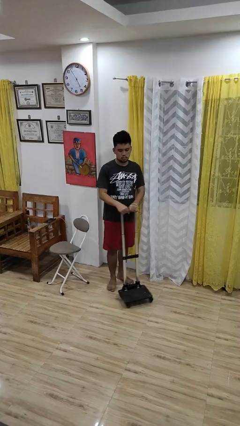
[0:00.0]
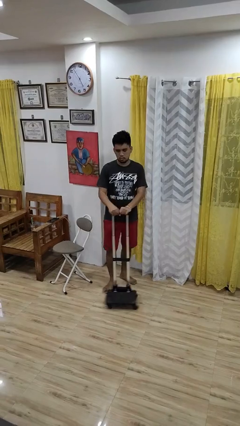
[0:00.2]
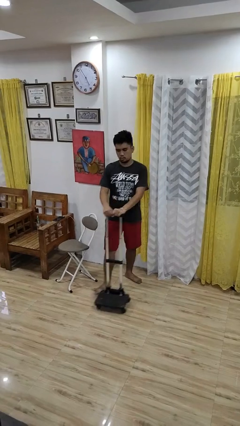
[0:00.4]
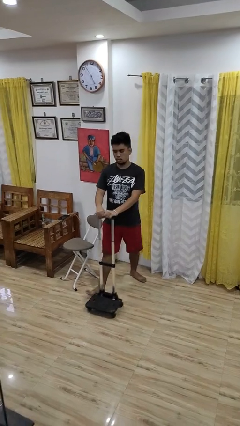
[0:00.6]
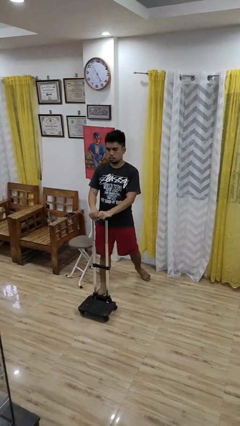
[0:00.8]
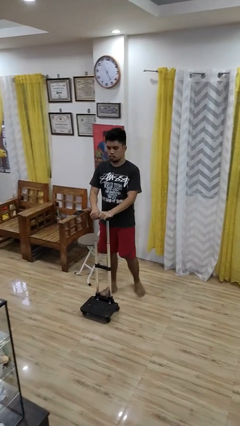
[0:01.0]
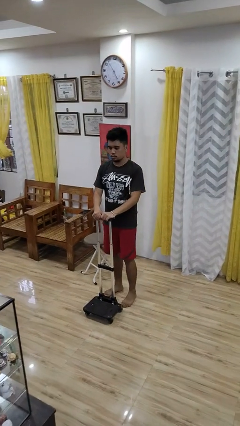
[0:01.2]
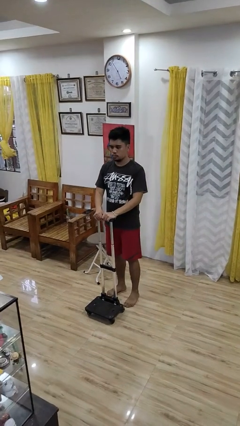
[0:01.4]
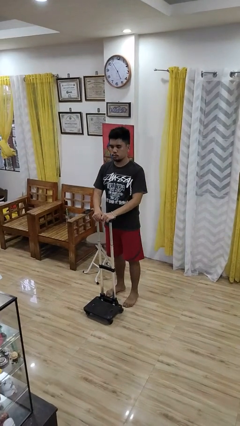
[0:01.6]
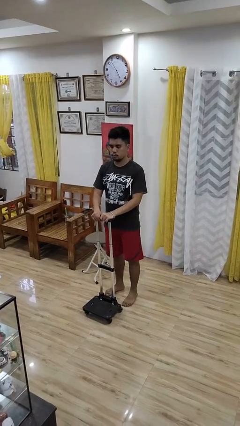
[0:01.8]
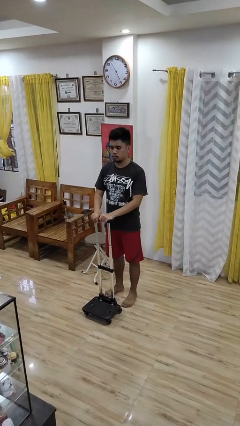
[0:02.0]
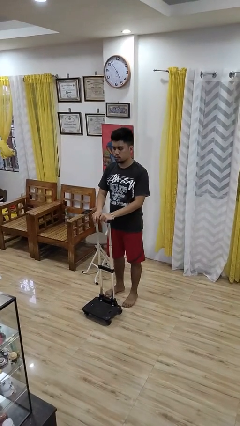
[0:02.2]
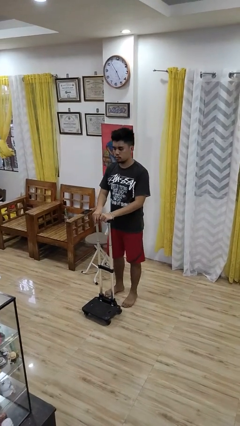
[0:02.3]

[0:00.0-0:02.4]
person pushes wheeled cart

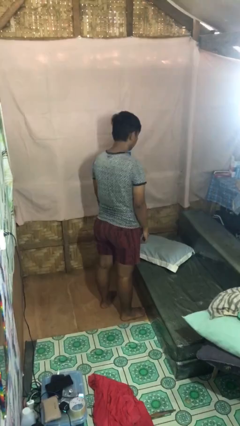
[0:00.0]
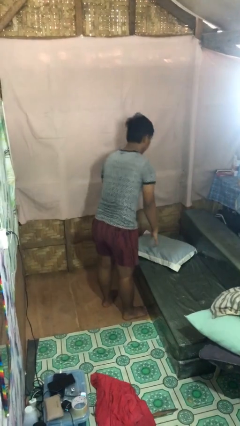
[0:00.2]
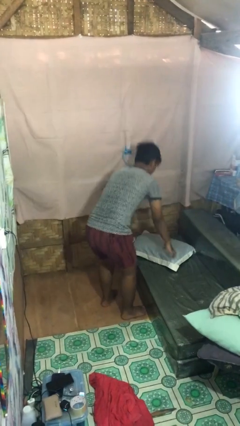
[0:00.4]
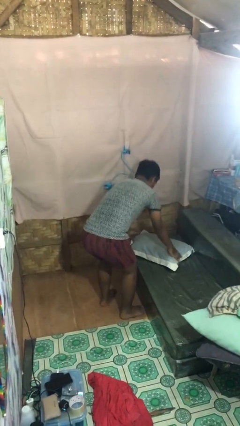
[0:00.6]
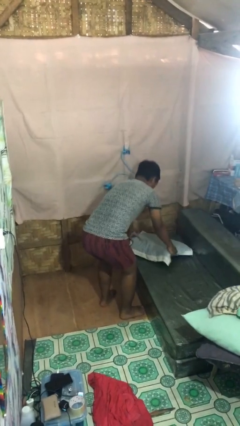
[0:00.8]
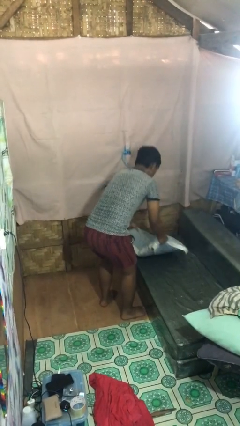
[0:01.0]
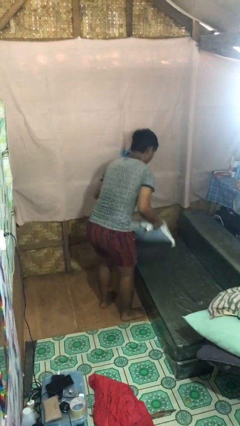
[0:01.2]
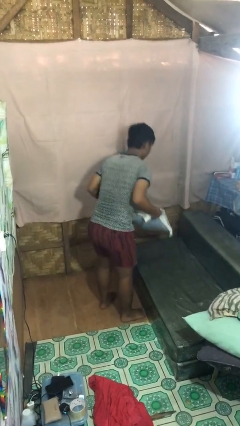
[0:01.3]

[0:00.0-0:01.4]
person picks up object from couch

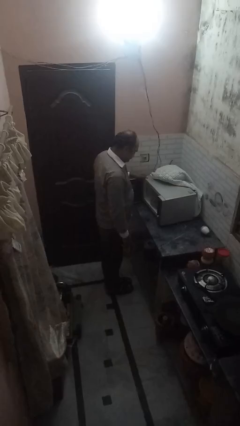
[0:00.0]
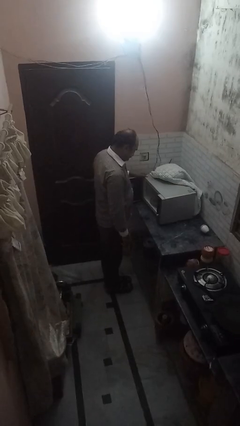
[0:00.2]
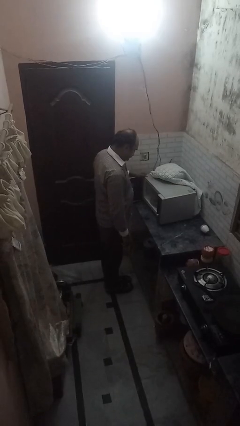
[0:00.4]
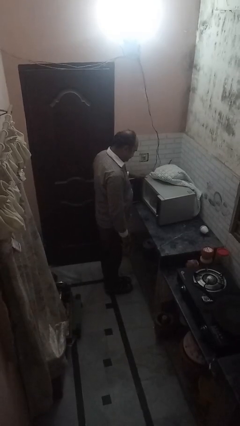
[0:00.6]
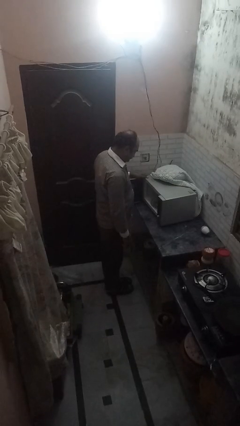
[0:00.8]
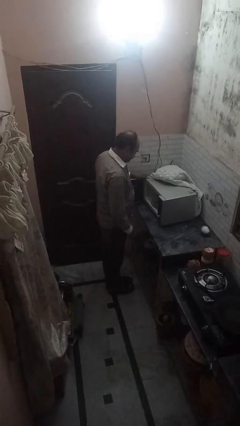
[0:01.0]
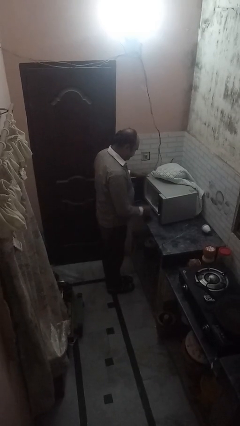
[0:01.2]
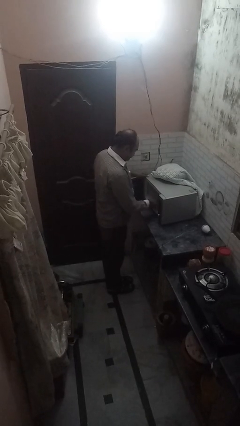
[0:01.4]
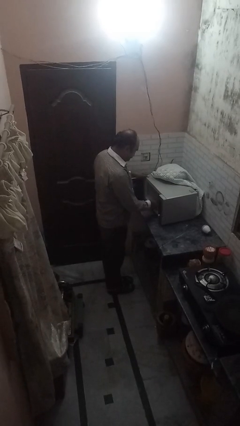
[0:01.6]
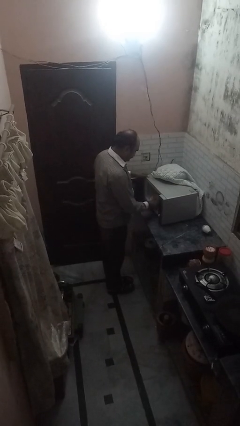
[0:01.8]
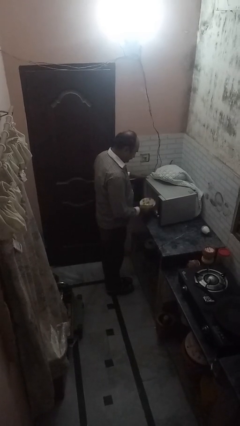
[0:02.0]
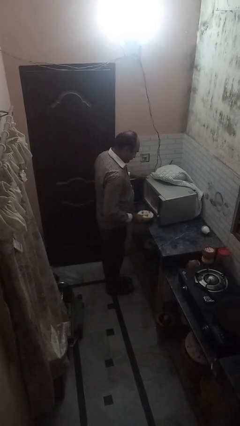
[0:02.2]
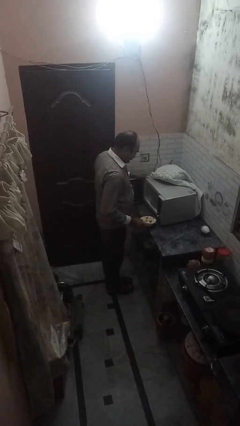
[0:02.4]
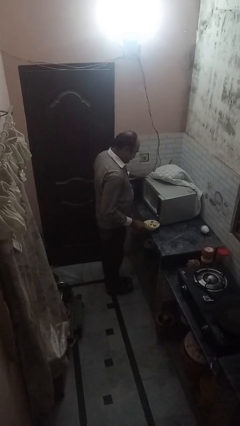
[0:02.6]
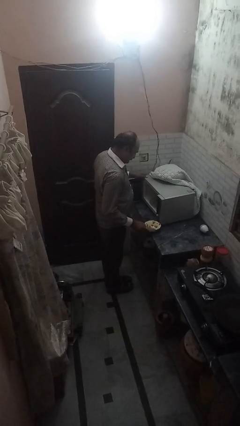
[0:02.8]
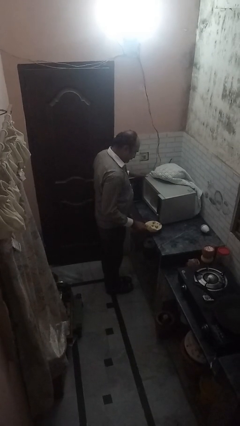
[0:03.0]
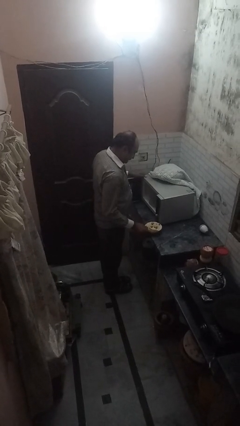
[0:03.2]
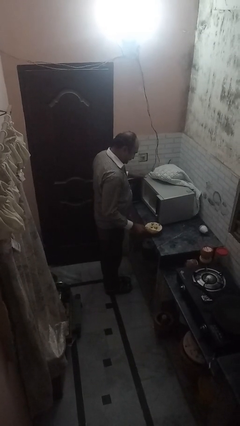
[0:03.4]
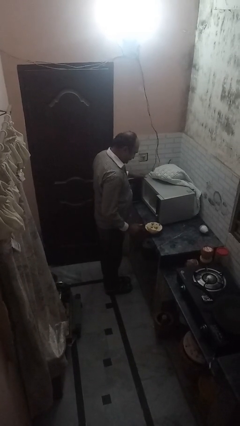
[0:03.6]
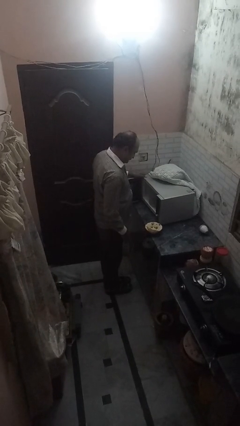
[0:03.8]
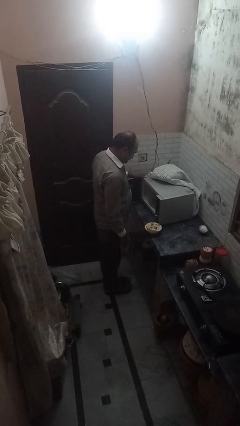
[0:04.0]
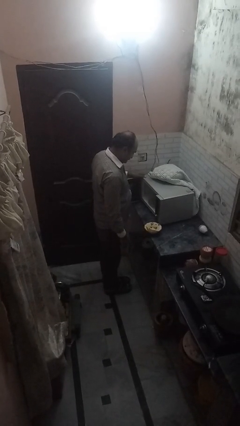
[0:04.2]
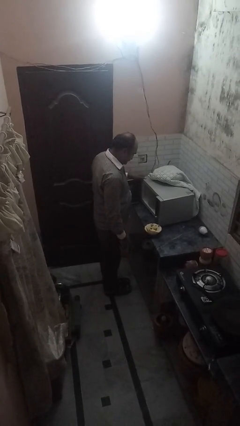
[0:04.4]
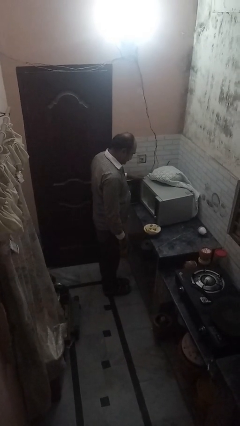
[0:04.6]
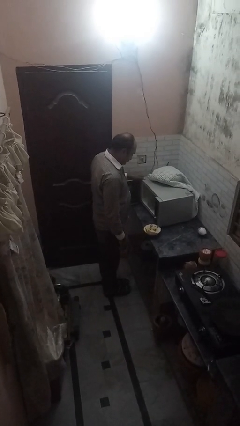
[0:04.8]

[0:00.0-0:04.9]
person takes object from microwave

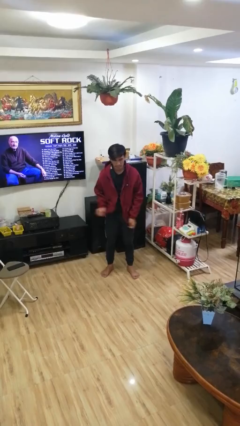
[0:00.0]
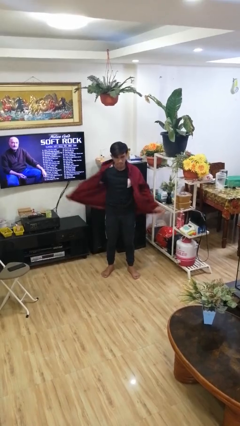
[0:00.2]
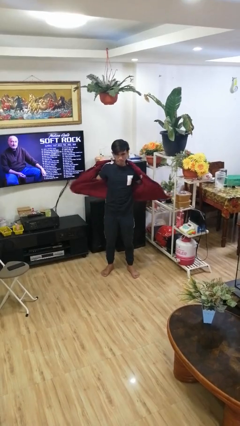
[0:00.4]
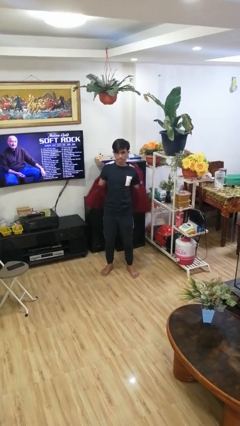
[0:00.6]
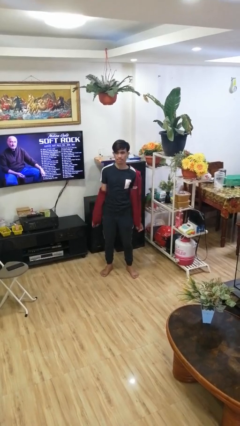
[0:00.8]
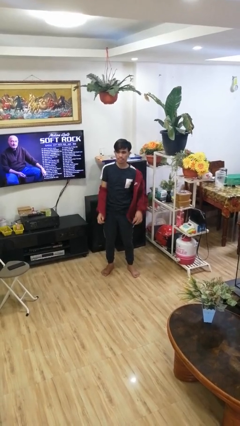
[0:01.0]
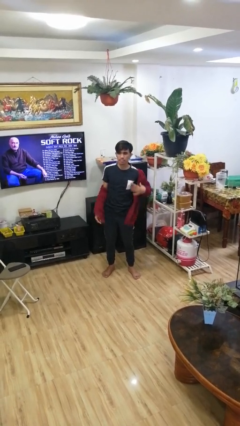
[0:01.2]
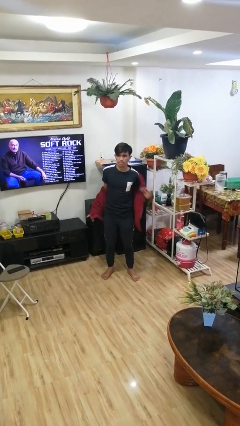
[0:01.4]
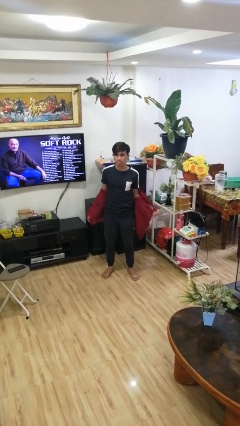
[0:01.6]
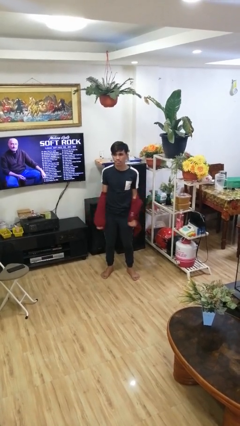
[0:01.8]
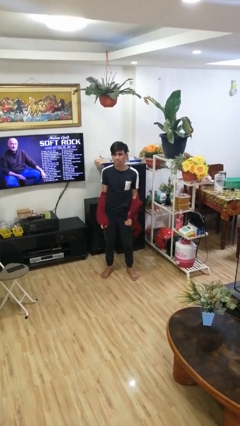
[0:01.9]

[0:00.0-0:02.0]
person takes off jacket

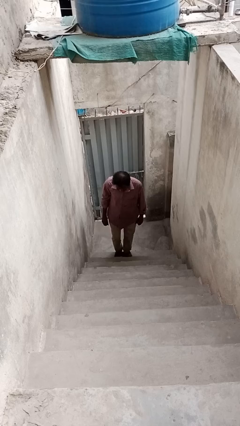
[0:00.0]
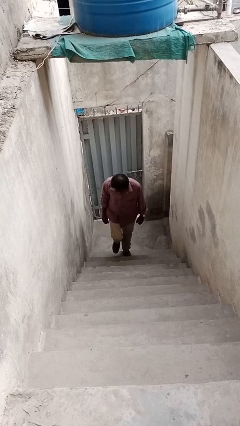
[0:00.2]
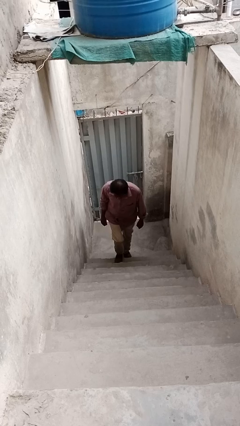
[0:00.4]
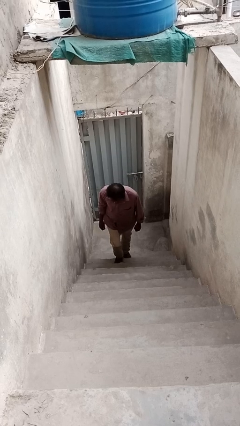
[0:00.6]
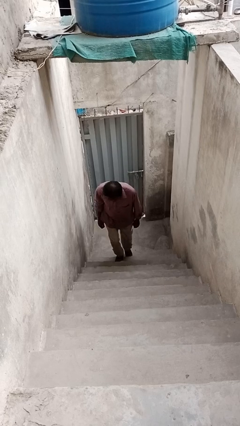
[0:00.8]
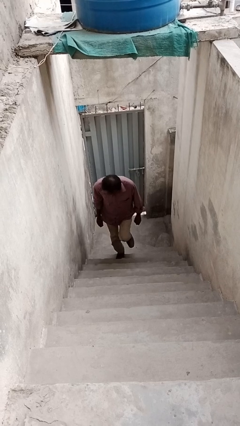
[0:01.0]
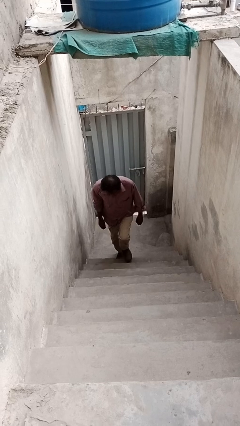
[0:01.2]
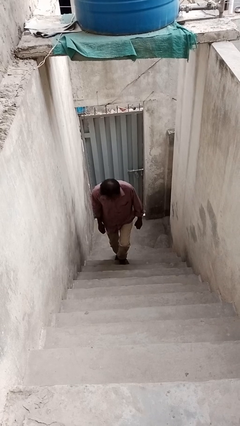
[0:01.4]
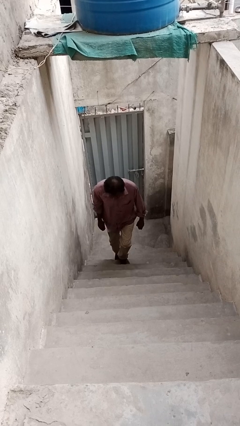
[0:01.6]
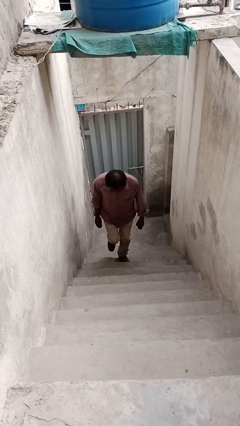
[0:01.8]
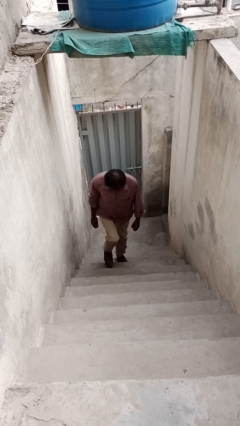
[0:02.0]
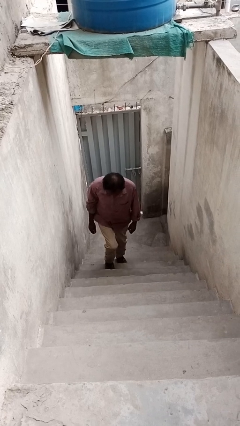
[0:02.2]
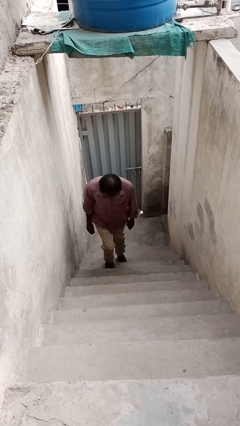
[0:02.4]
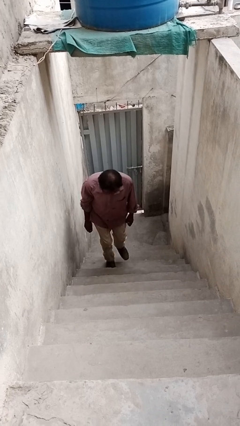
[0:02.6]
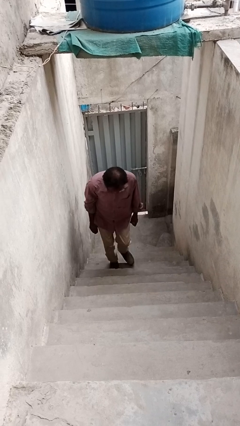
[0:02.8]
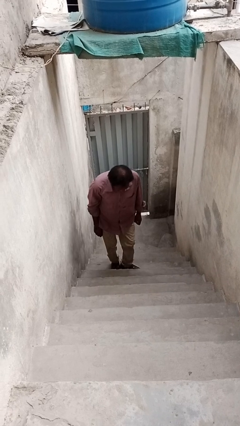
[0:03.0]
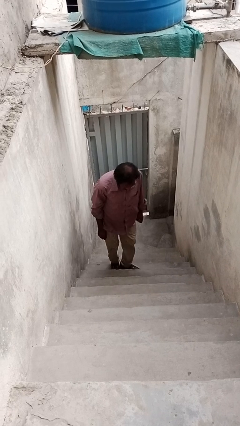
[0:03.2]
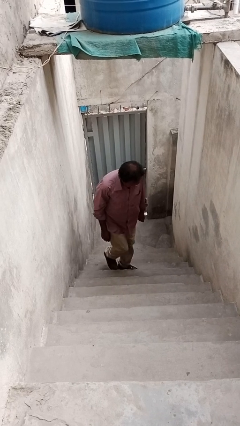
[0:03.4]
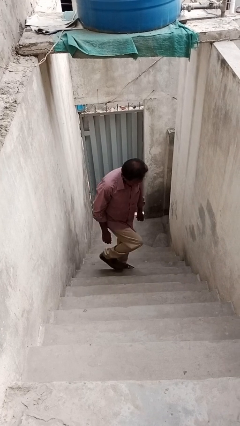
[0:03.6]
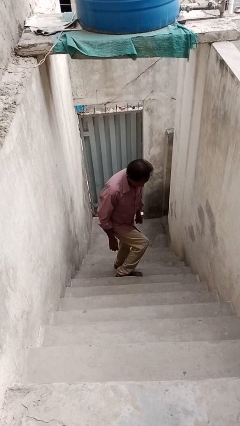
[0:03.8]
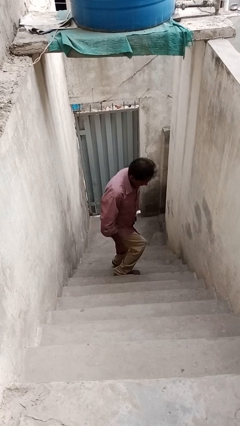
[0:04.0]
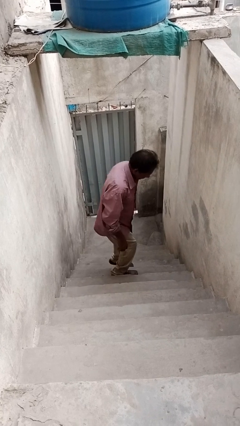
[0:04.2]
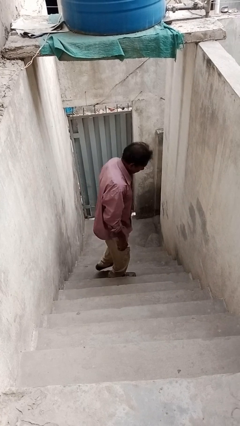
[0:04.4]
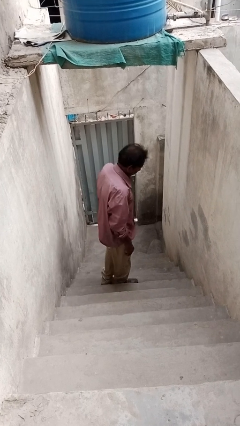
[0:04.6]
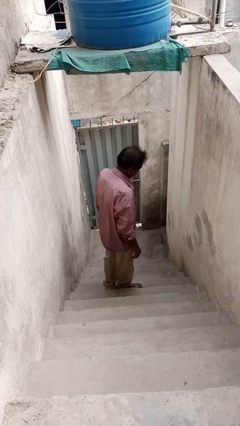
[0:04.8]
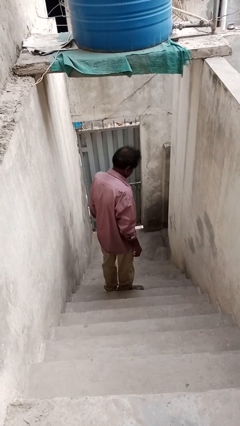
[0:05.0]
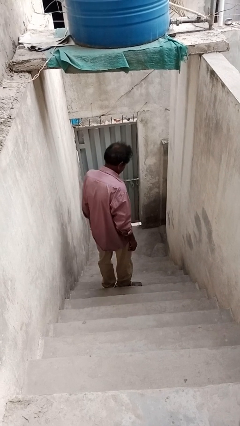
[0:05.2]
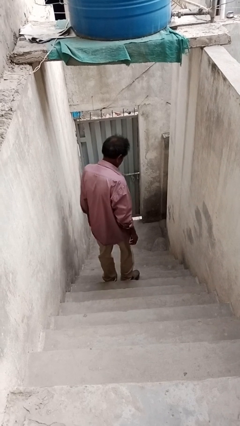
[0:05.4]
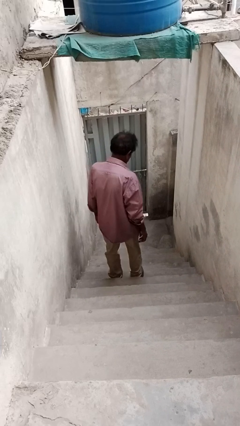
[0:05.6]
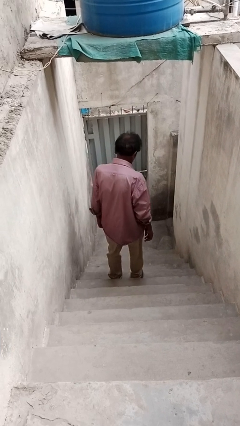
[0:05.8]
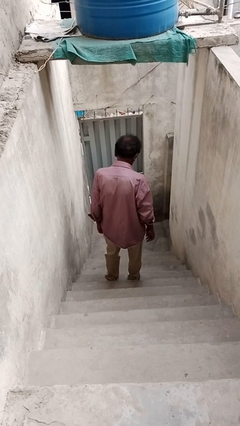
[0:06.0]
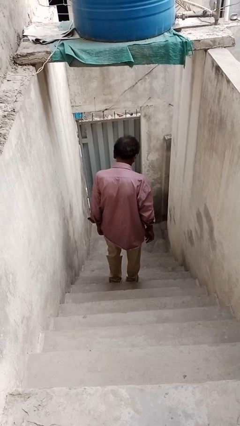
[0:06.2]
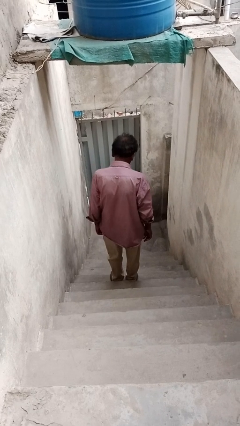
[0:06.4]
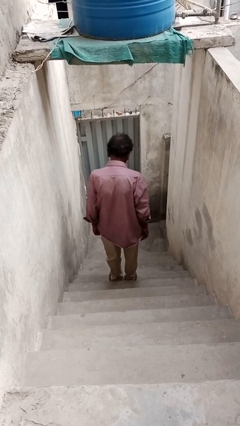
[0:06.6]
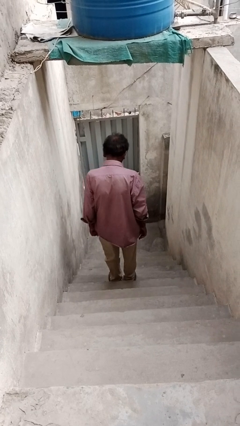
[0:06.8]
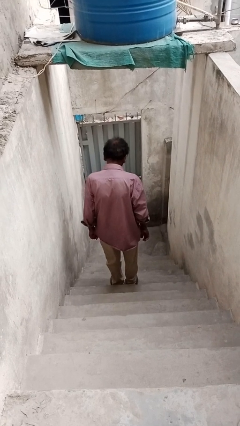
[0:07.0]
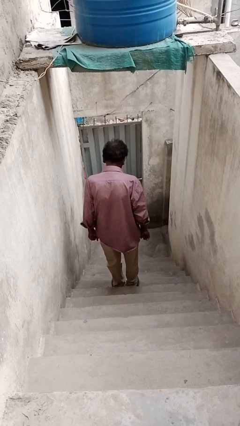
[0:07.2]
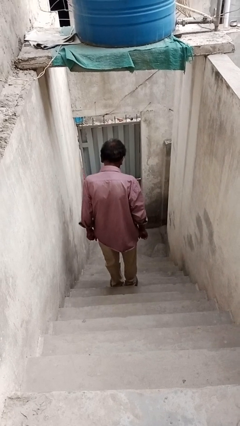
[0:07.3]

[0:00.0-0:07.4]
person climbs up stairs
